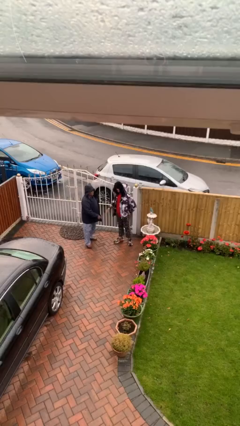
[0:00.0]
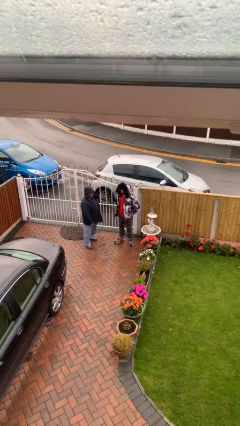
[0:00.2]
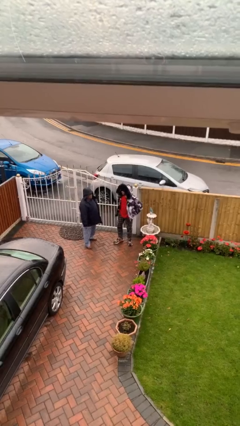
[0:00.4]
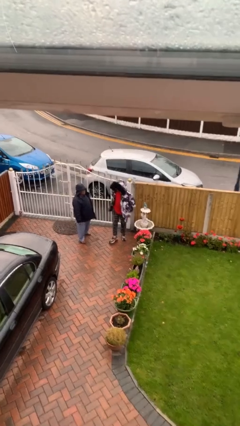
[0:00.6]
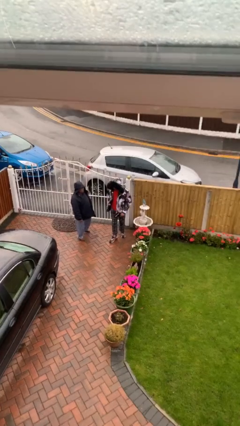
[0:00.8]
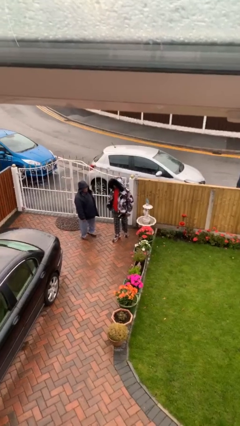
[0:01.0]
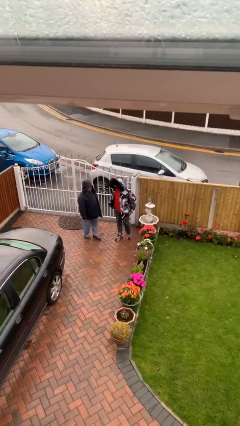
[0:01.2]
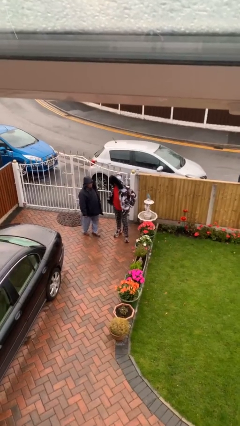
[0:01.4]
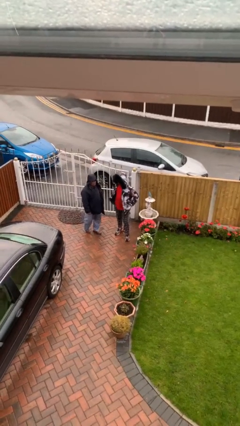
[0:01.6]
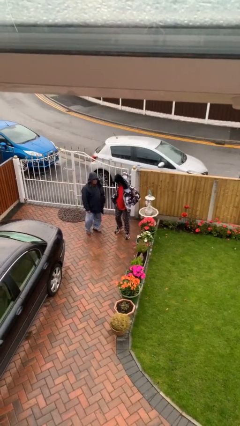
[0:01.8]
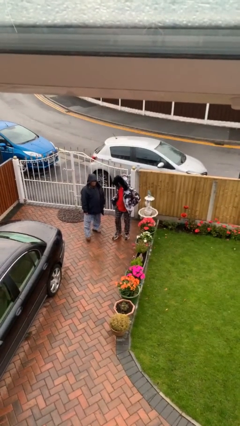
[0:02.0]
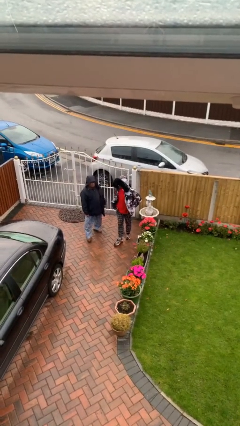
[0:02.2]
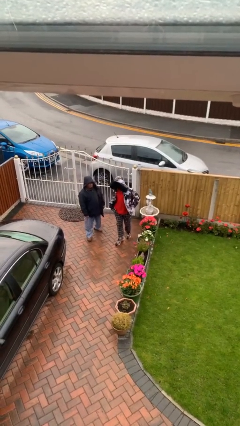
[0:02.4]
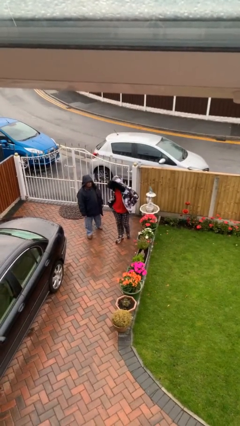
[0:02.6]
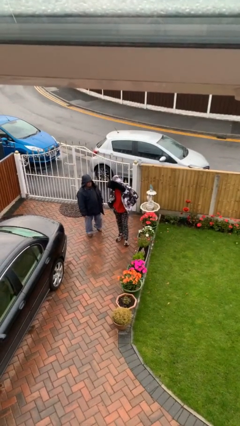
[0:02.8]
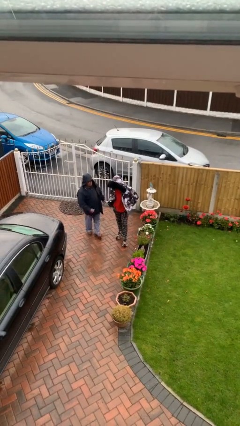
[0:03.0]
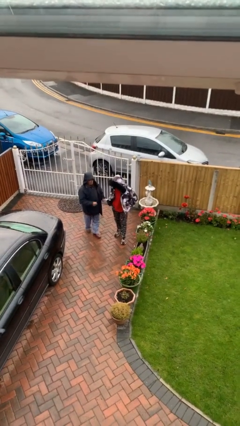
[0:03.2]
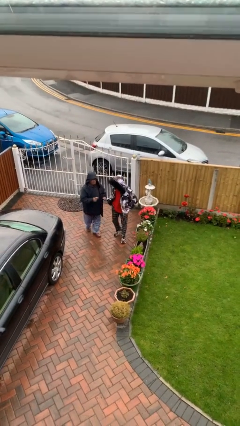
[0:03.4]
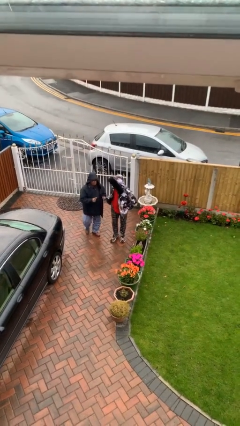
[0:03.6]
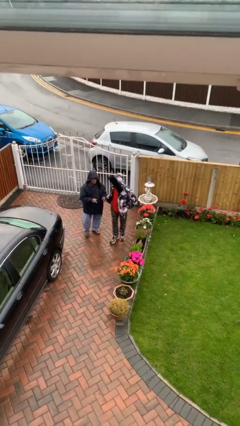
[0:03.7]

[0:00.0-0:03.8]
person talks to person

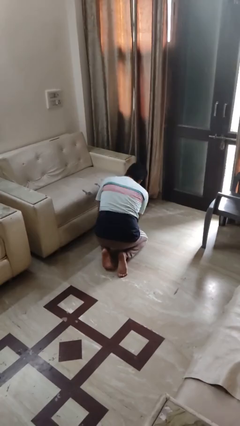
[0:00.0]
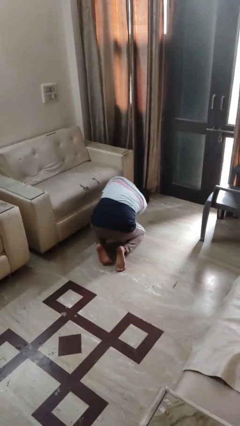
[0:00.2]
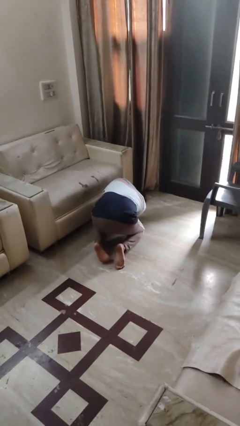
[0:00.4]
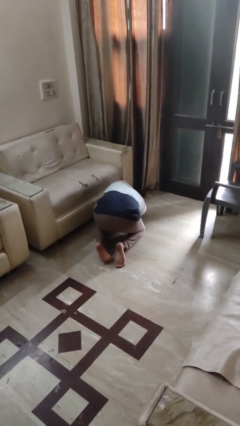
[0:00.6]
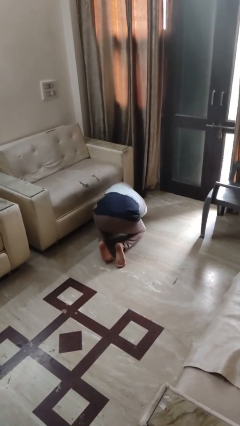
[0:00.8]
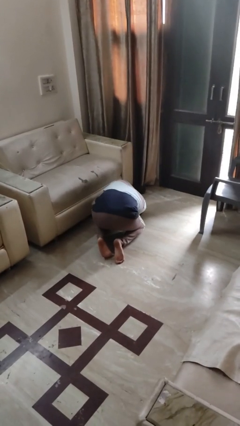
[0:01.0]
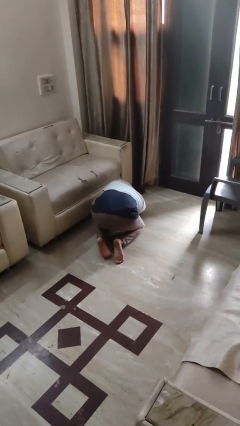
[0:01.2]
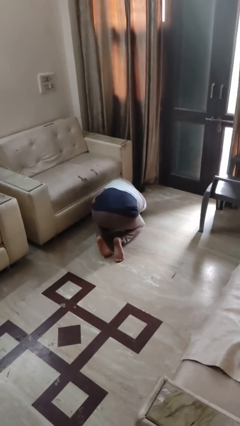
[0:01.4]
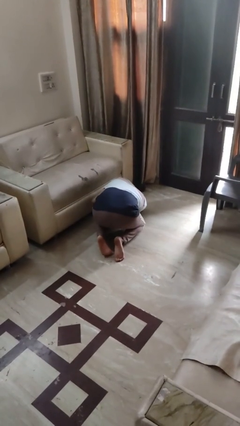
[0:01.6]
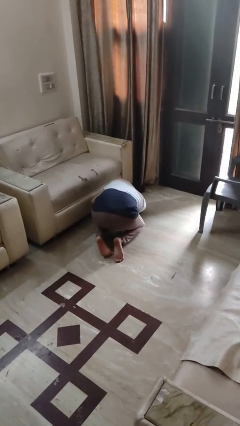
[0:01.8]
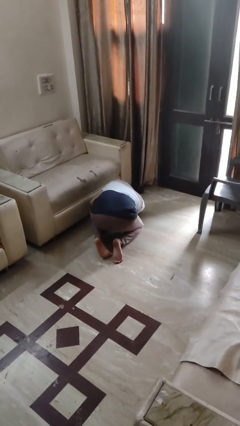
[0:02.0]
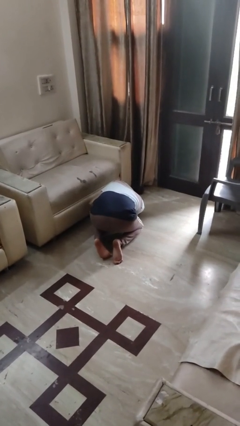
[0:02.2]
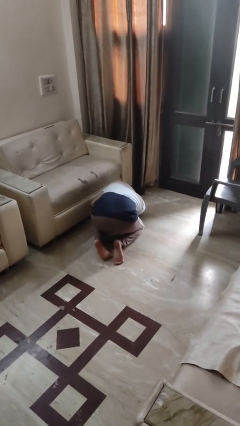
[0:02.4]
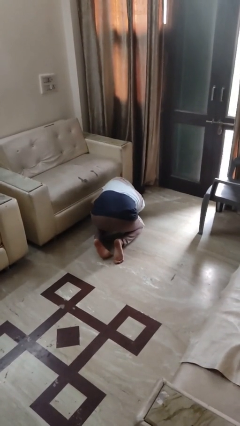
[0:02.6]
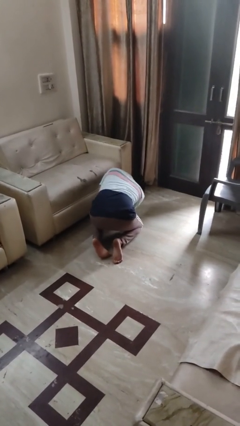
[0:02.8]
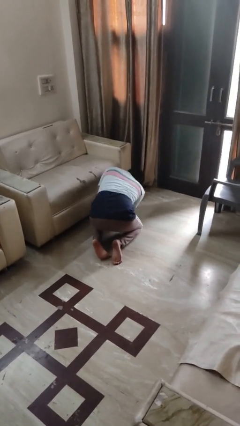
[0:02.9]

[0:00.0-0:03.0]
person searches under couch

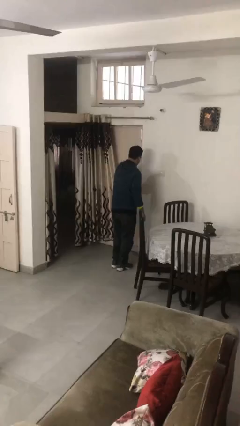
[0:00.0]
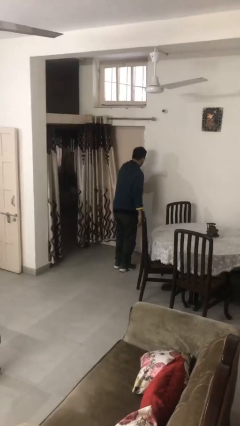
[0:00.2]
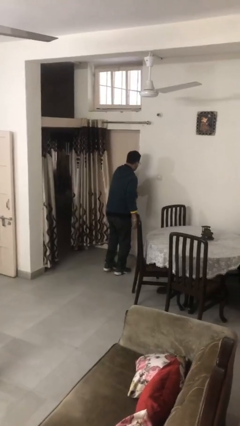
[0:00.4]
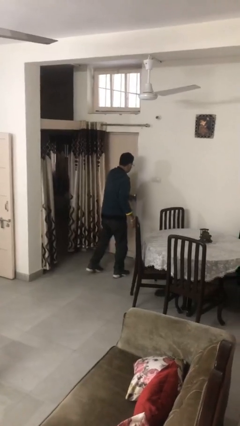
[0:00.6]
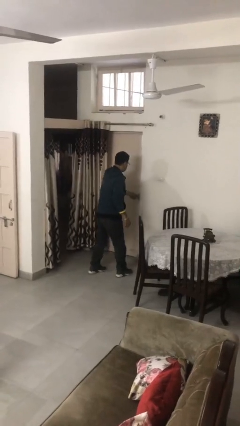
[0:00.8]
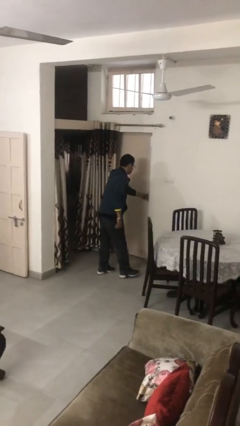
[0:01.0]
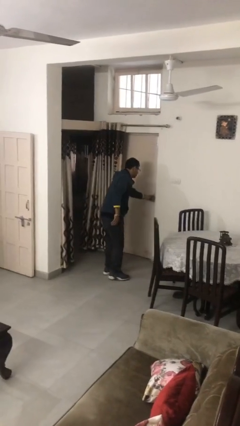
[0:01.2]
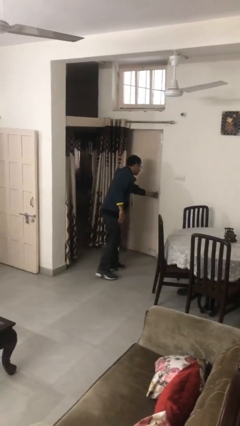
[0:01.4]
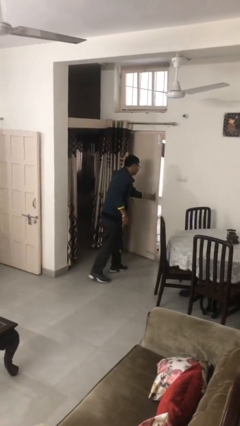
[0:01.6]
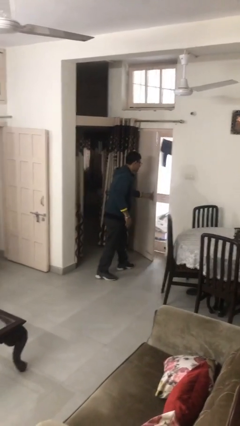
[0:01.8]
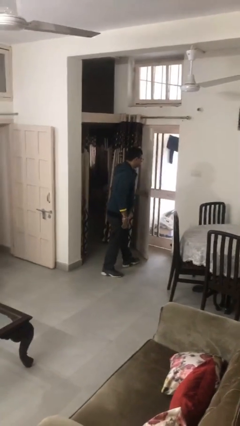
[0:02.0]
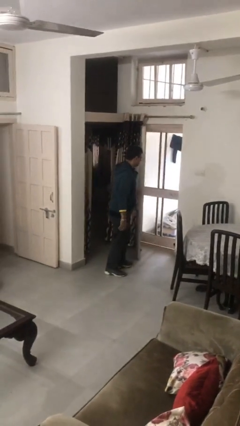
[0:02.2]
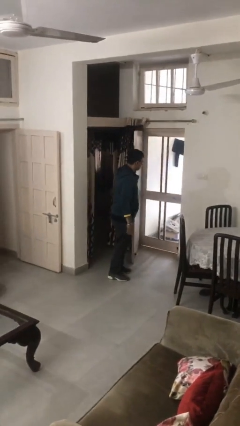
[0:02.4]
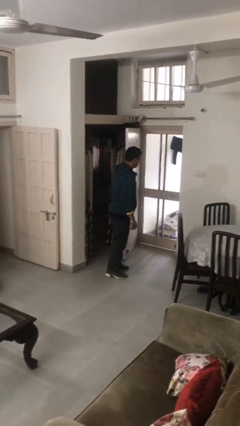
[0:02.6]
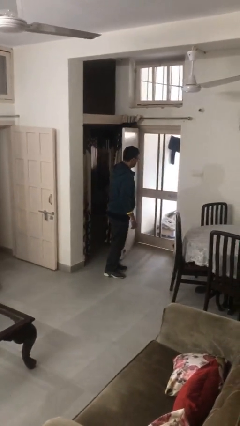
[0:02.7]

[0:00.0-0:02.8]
person opens facility door

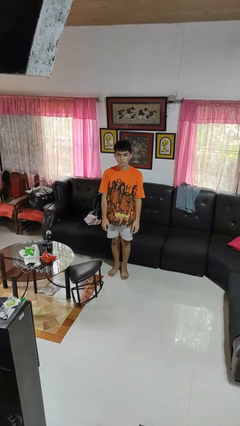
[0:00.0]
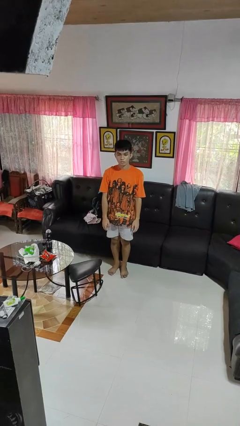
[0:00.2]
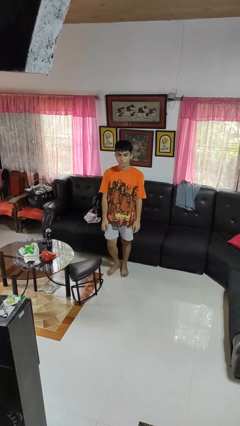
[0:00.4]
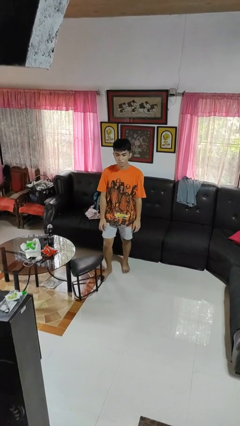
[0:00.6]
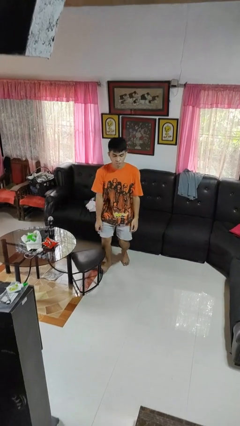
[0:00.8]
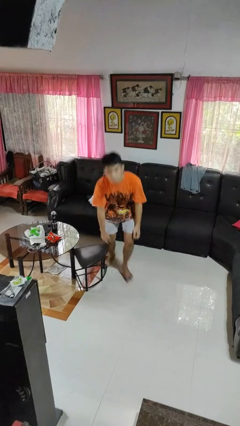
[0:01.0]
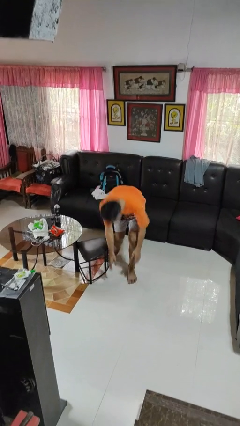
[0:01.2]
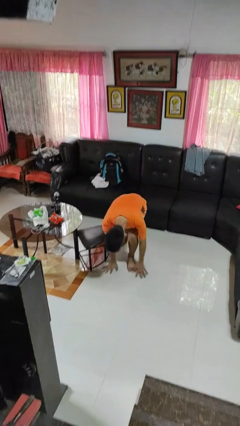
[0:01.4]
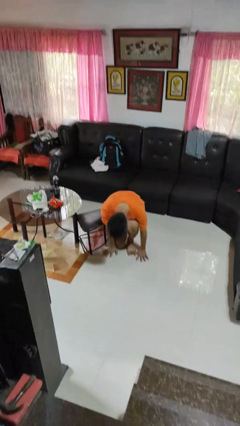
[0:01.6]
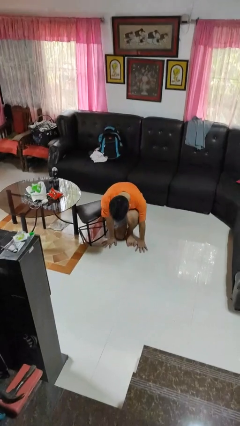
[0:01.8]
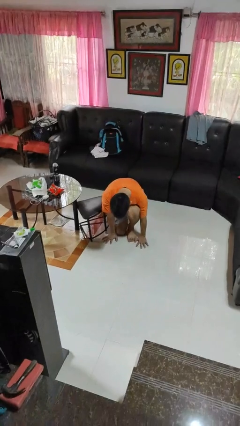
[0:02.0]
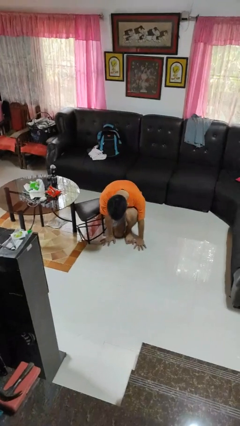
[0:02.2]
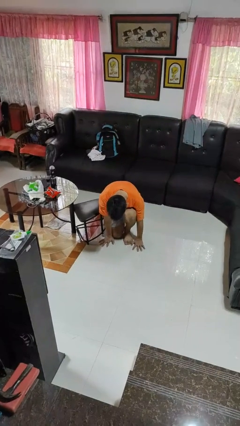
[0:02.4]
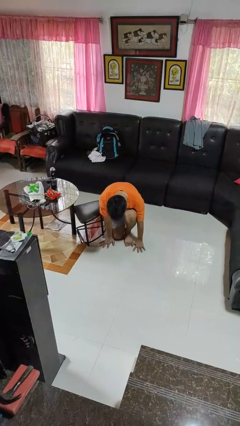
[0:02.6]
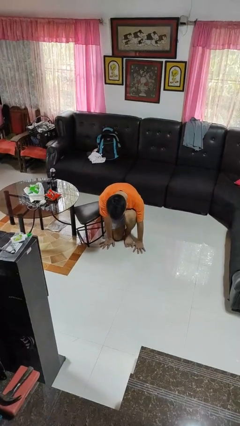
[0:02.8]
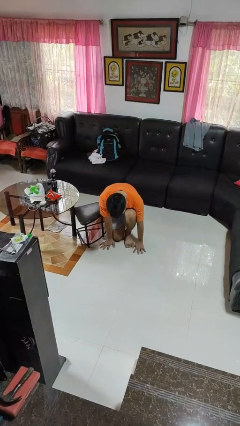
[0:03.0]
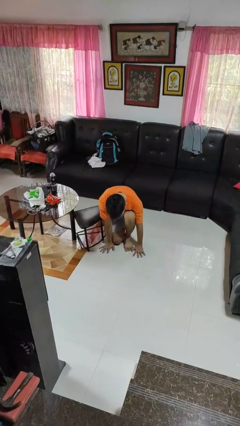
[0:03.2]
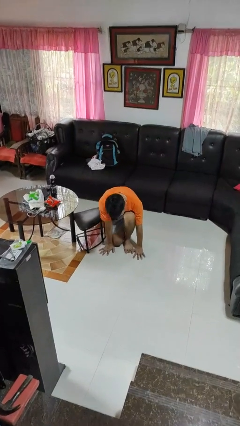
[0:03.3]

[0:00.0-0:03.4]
person trips on object on floor

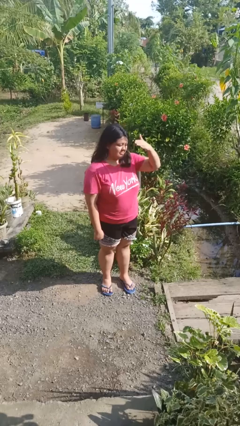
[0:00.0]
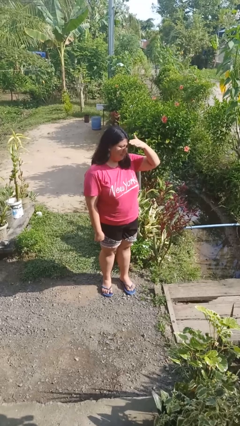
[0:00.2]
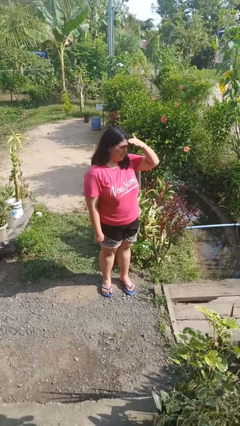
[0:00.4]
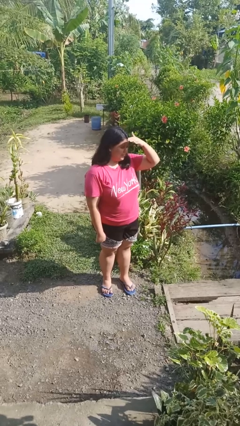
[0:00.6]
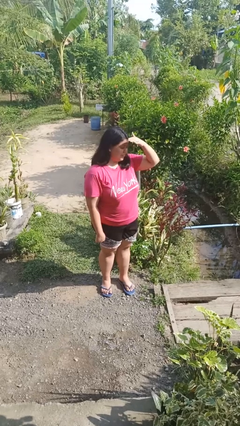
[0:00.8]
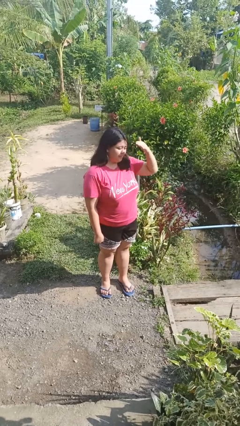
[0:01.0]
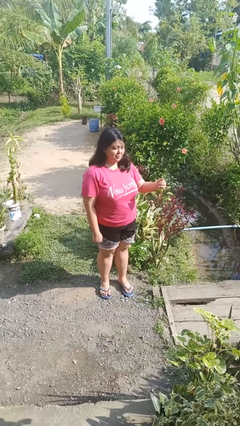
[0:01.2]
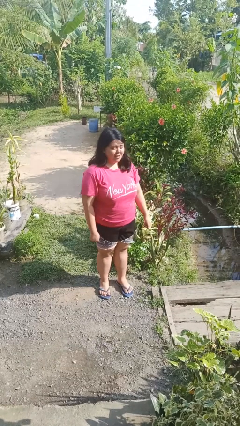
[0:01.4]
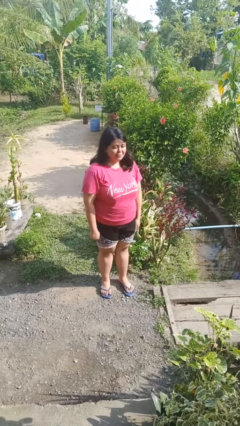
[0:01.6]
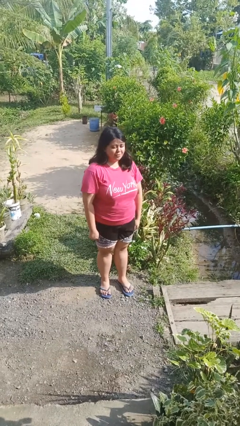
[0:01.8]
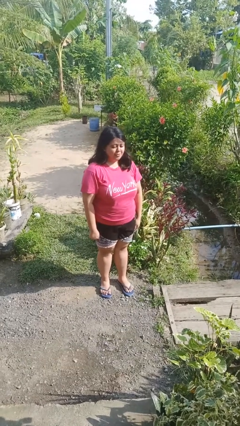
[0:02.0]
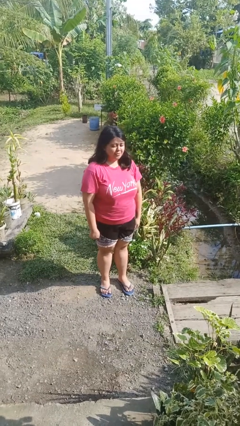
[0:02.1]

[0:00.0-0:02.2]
person shades eyes

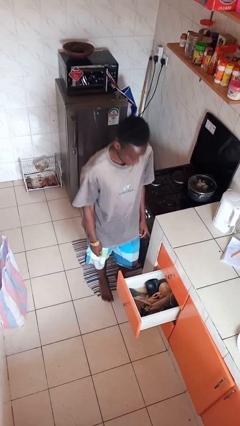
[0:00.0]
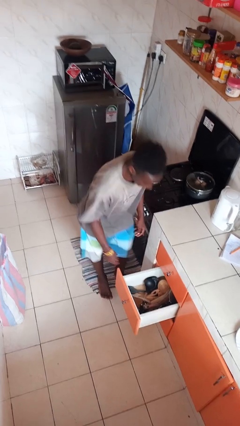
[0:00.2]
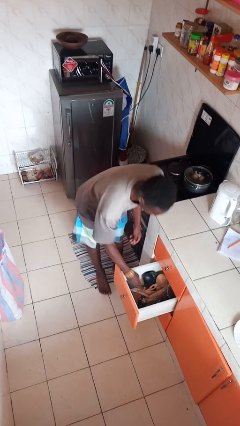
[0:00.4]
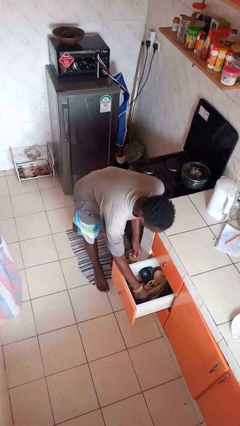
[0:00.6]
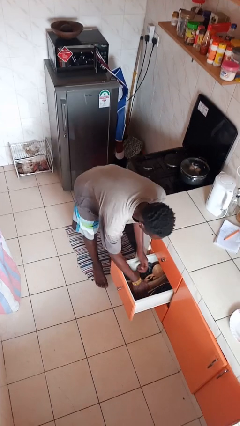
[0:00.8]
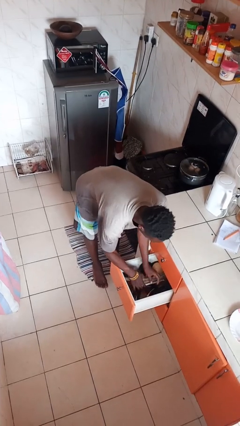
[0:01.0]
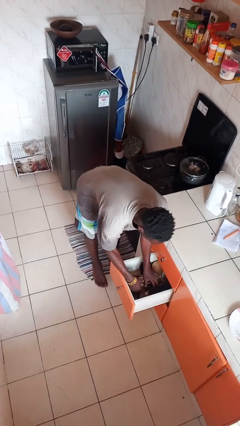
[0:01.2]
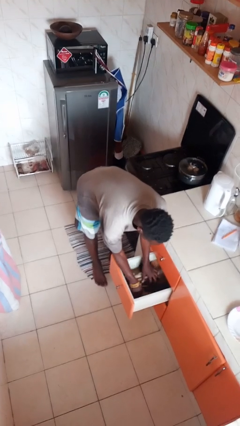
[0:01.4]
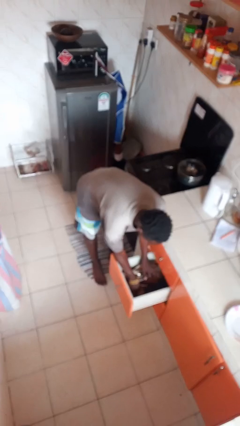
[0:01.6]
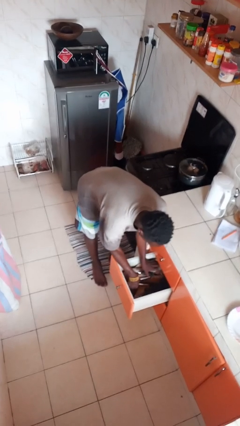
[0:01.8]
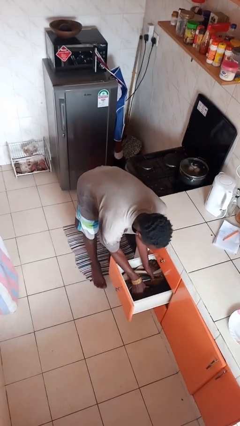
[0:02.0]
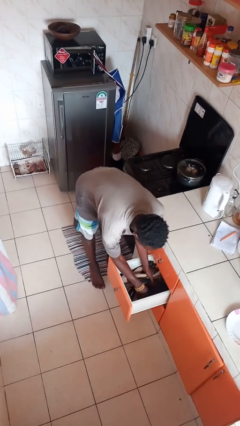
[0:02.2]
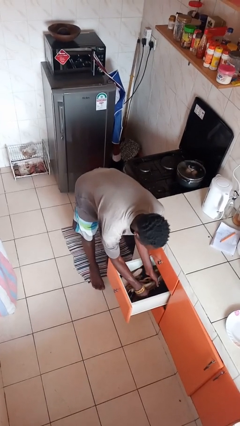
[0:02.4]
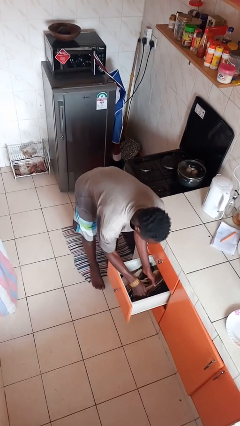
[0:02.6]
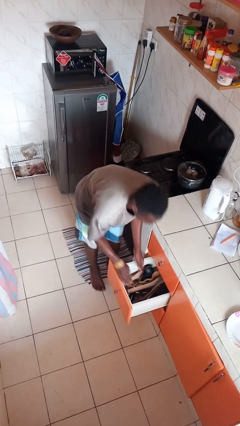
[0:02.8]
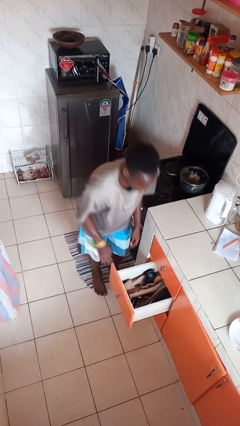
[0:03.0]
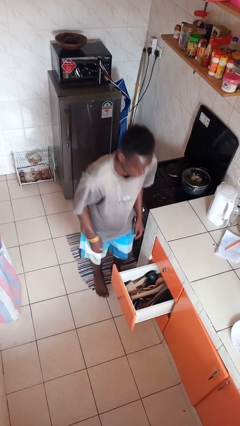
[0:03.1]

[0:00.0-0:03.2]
person searches in kitchen drawer
